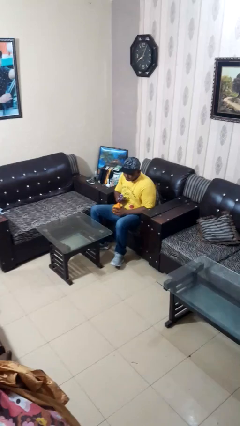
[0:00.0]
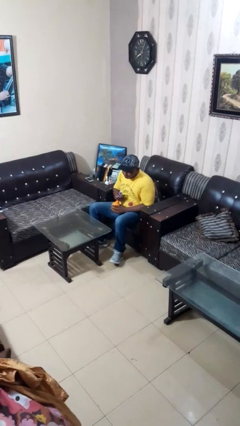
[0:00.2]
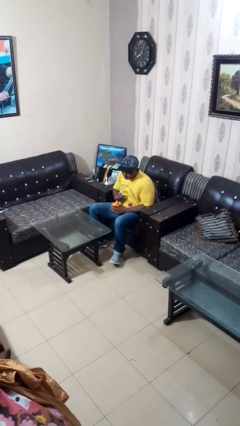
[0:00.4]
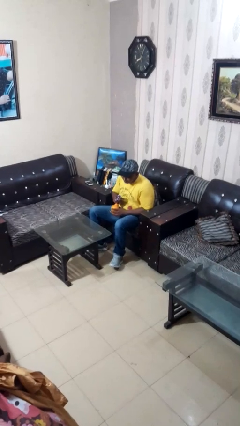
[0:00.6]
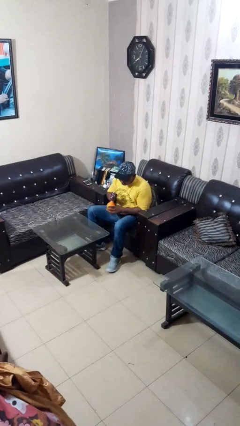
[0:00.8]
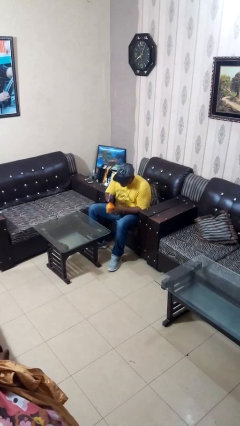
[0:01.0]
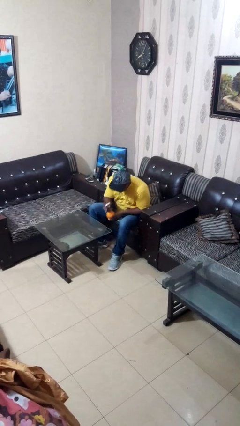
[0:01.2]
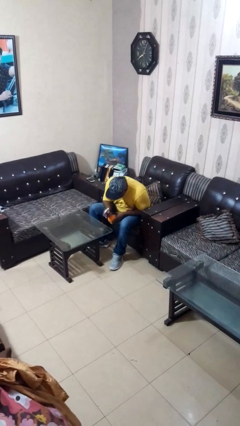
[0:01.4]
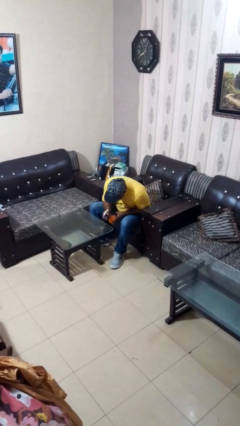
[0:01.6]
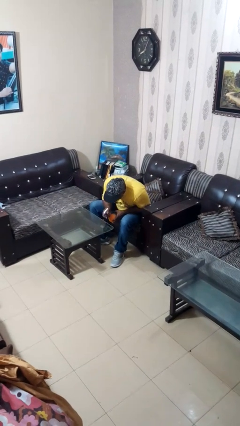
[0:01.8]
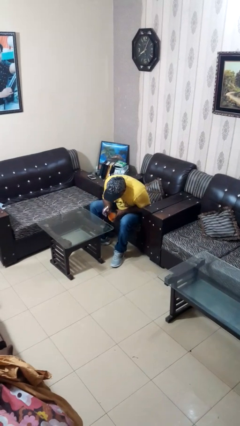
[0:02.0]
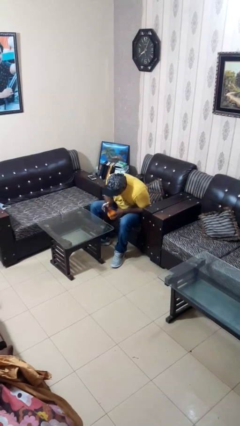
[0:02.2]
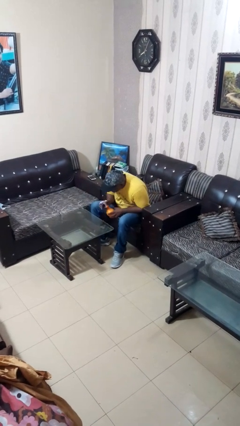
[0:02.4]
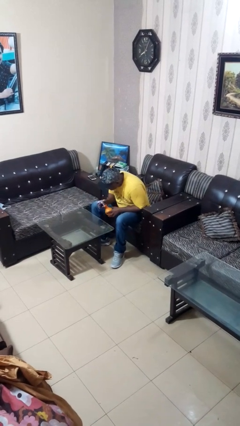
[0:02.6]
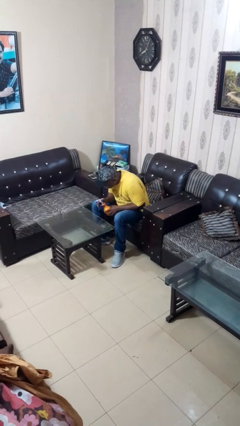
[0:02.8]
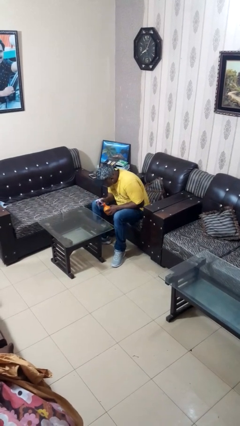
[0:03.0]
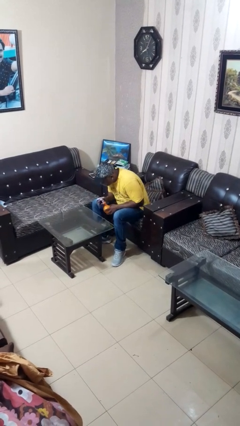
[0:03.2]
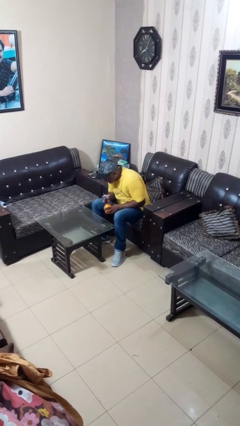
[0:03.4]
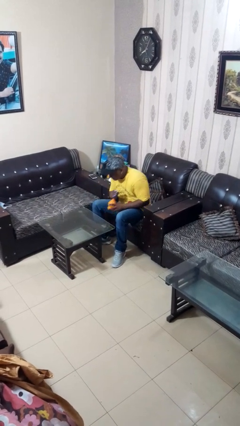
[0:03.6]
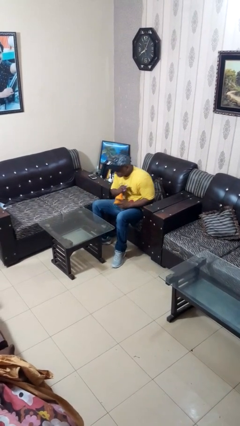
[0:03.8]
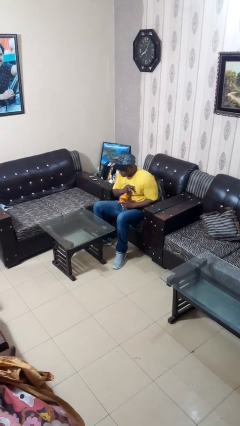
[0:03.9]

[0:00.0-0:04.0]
person sprays from bottle

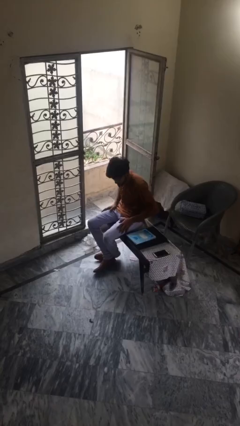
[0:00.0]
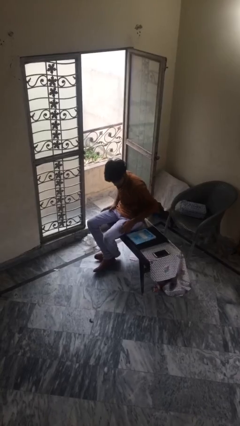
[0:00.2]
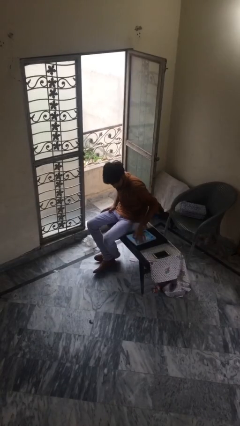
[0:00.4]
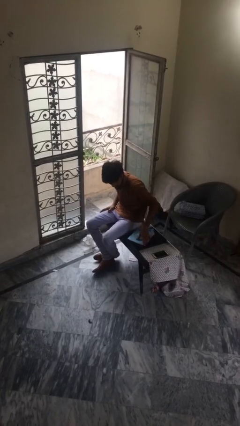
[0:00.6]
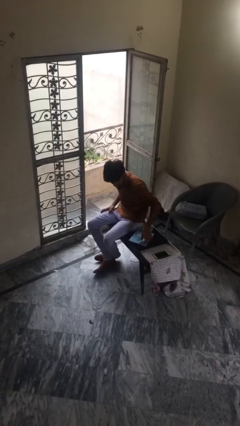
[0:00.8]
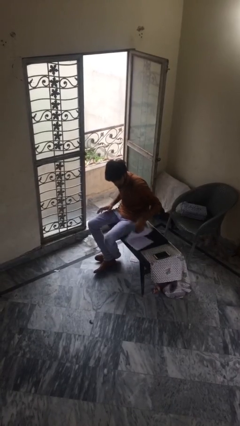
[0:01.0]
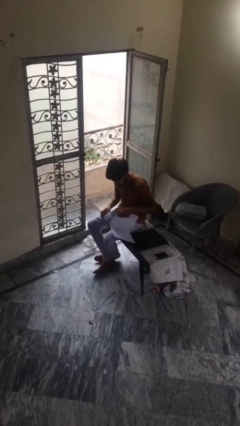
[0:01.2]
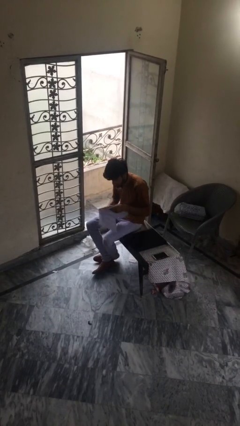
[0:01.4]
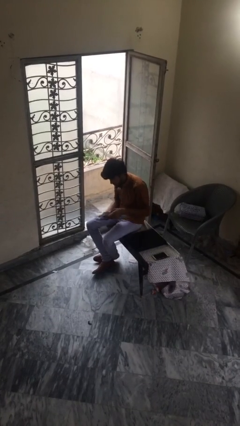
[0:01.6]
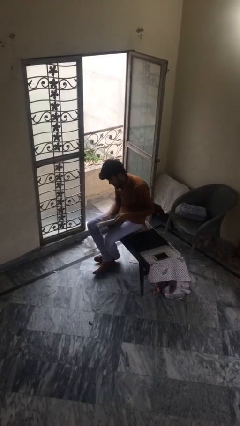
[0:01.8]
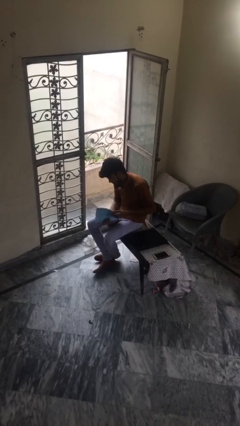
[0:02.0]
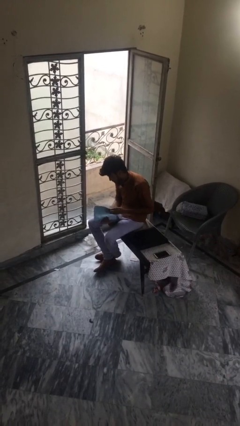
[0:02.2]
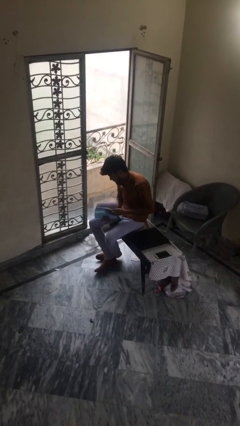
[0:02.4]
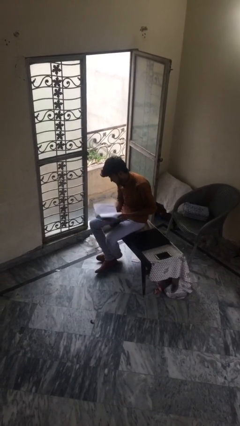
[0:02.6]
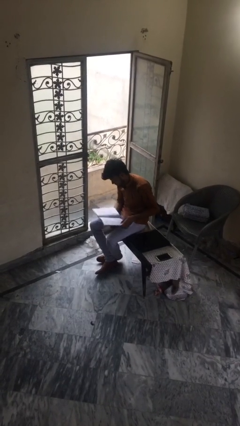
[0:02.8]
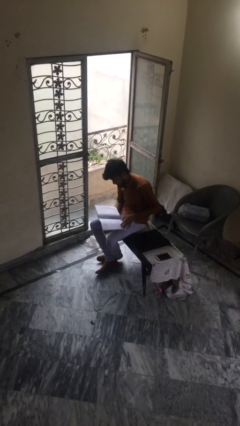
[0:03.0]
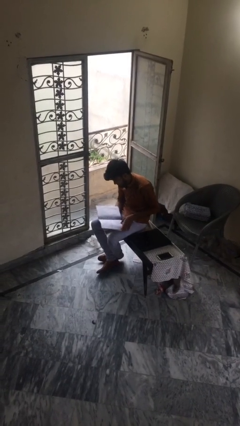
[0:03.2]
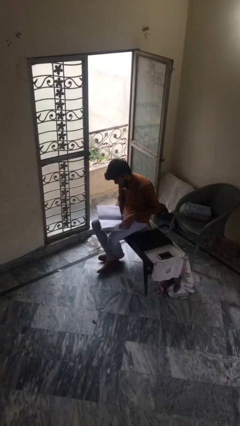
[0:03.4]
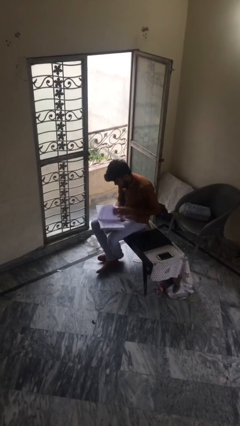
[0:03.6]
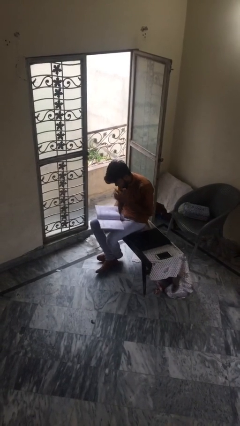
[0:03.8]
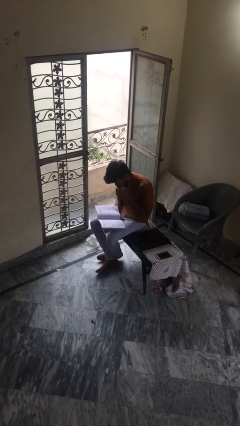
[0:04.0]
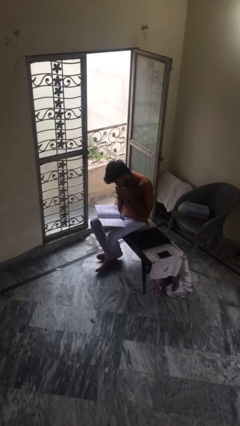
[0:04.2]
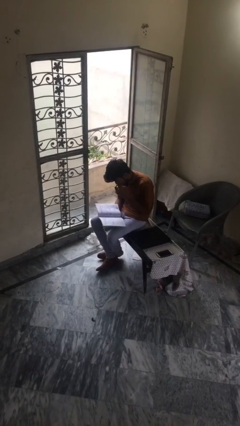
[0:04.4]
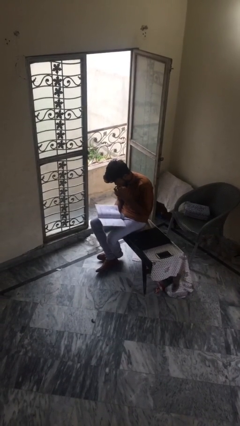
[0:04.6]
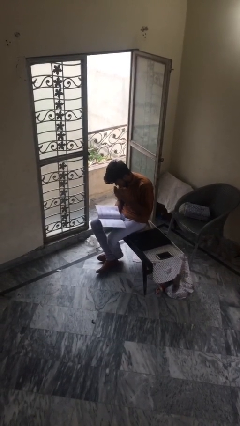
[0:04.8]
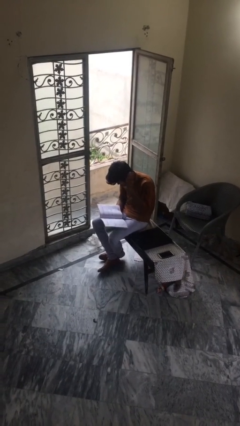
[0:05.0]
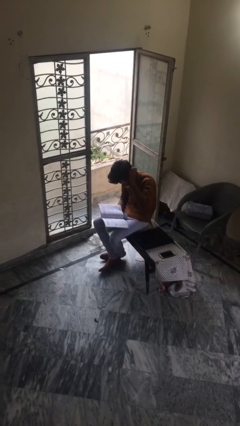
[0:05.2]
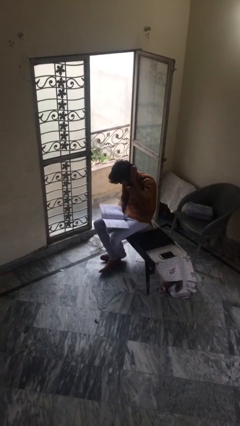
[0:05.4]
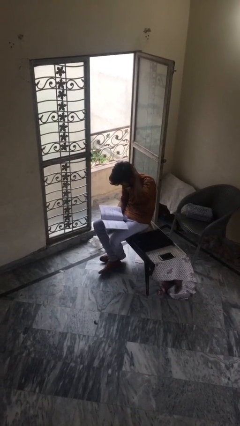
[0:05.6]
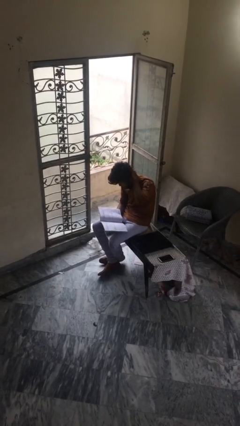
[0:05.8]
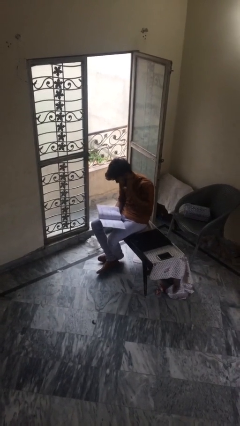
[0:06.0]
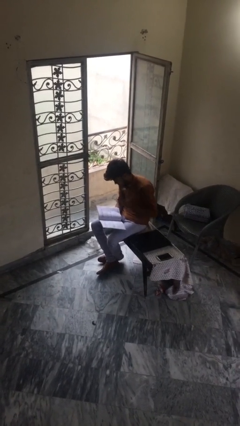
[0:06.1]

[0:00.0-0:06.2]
person reads document

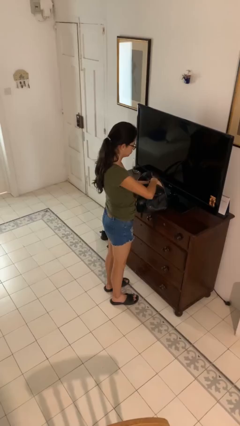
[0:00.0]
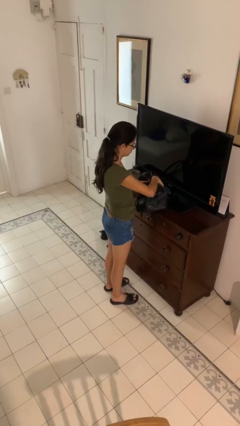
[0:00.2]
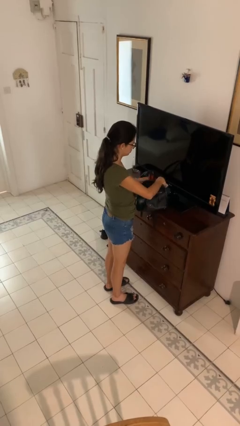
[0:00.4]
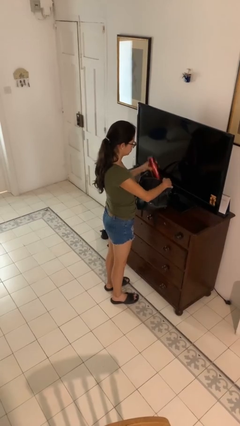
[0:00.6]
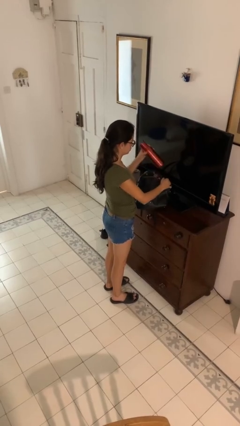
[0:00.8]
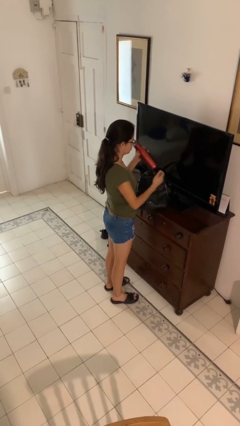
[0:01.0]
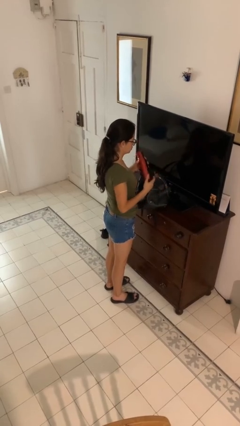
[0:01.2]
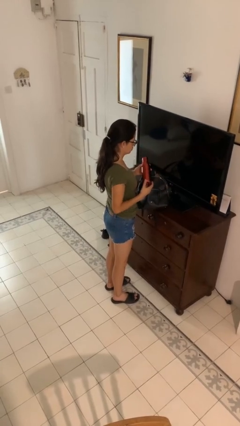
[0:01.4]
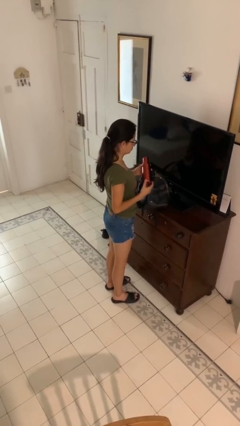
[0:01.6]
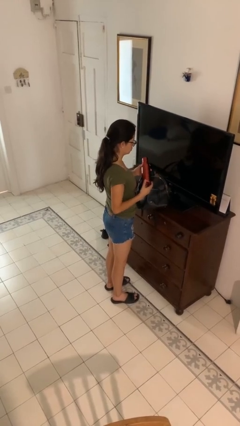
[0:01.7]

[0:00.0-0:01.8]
person takes object from purse

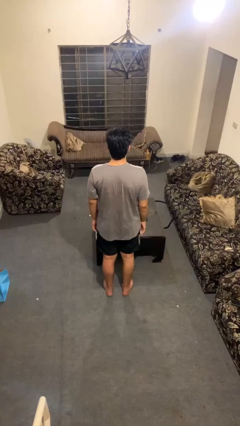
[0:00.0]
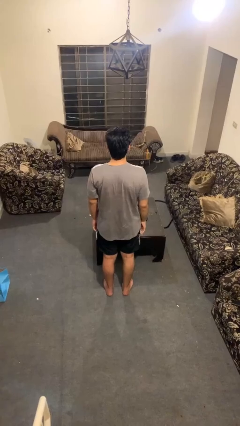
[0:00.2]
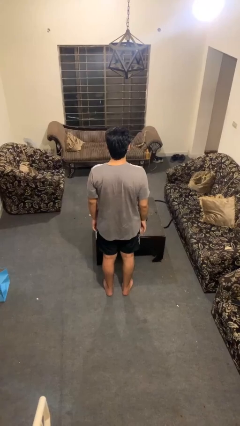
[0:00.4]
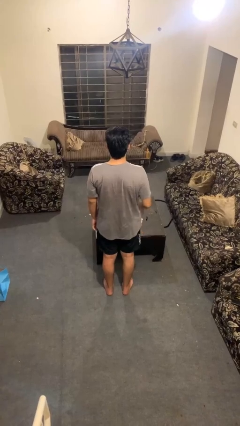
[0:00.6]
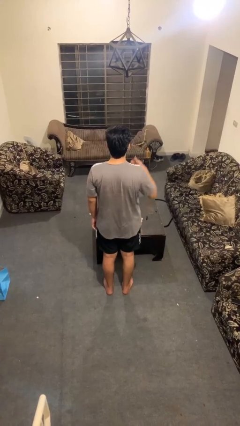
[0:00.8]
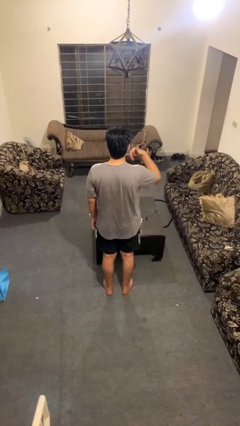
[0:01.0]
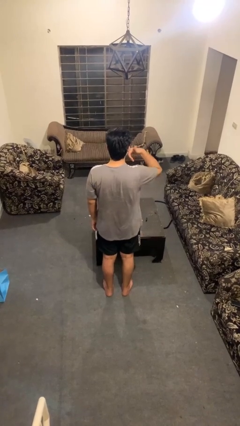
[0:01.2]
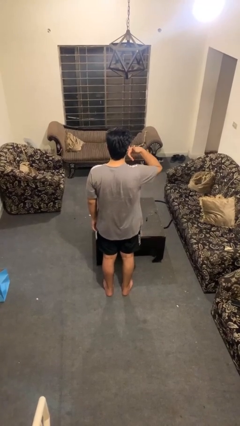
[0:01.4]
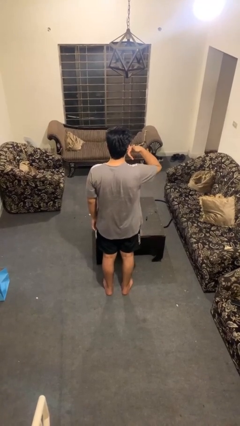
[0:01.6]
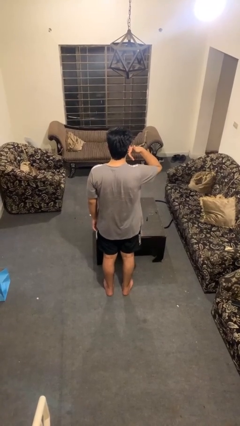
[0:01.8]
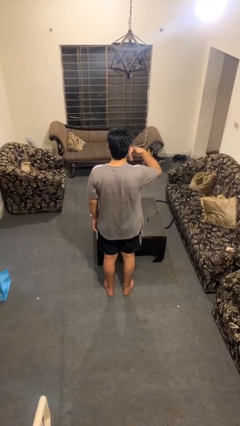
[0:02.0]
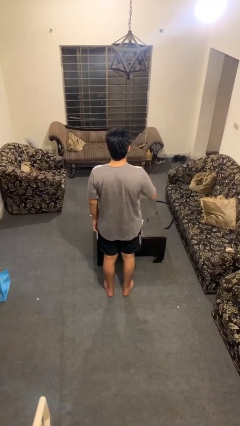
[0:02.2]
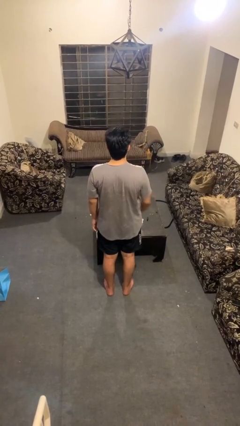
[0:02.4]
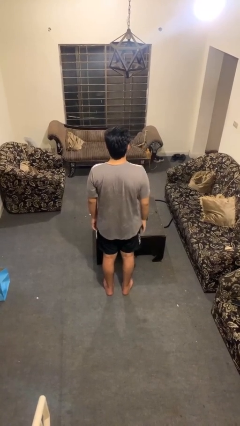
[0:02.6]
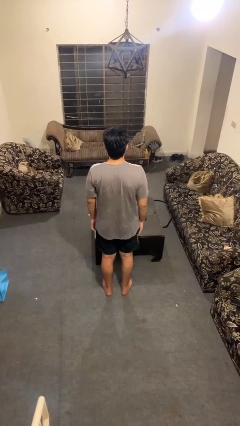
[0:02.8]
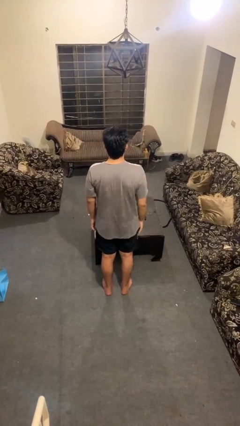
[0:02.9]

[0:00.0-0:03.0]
person gestures call me

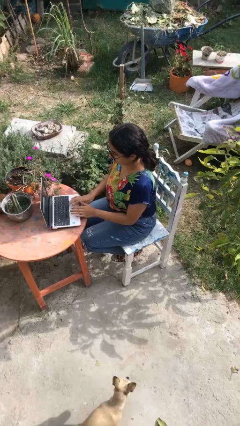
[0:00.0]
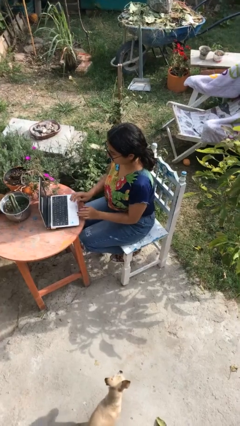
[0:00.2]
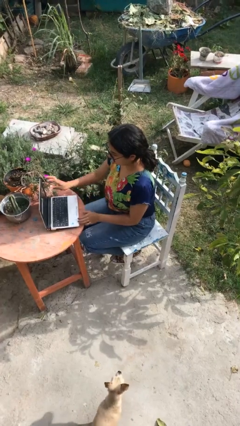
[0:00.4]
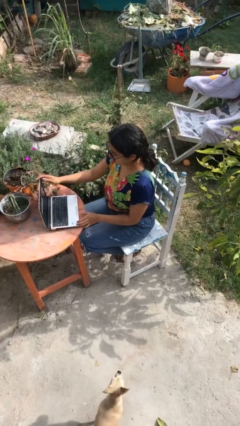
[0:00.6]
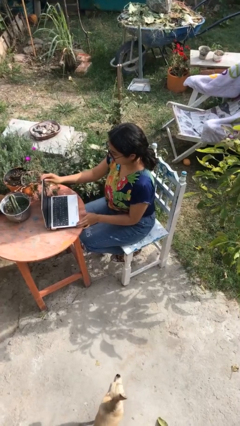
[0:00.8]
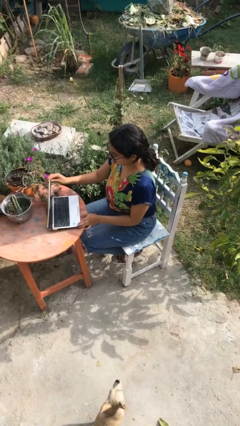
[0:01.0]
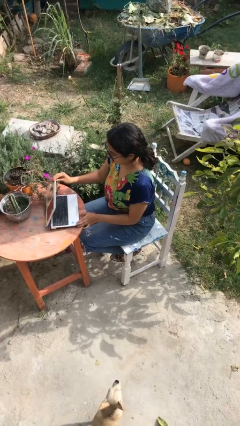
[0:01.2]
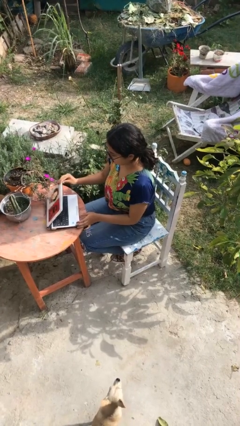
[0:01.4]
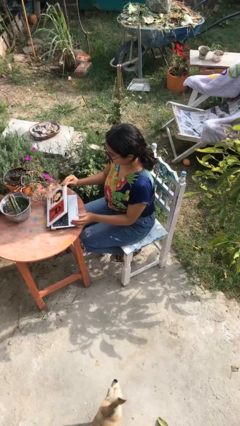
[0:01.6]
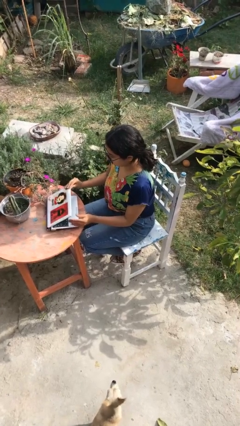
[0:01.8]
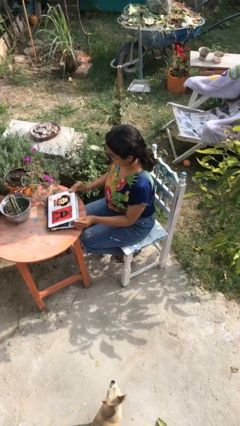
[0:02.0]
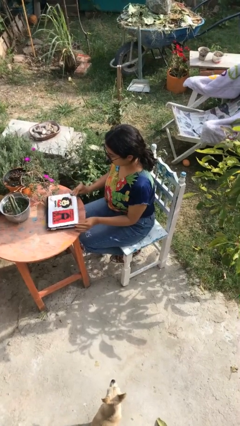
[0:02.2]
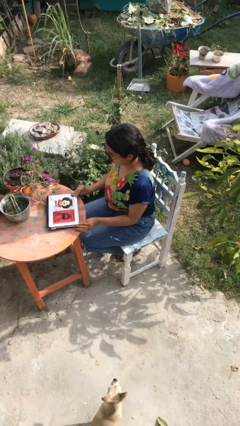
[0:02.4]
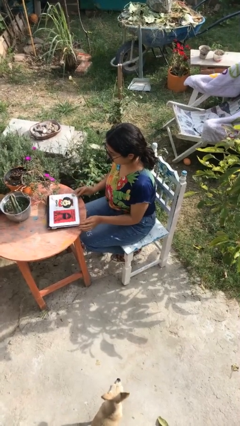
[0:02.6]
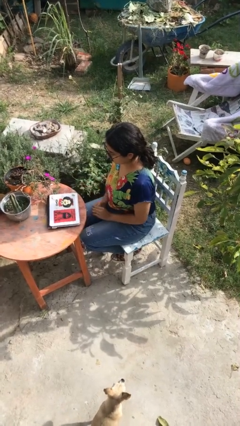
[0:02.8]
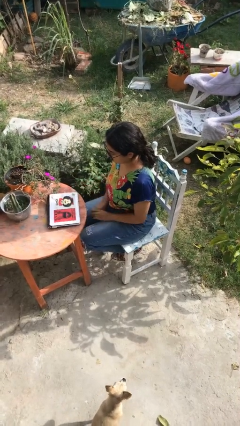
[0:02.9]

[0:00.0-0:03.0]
person closes laptop
